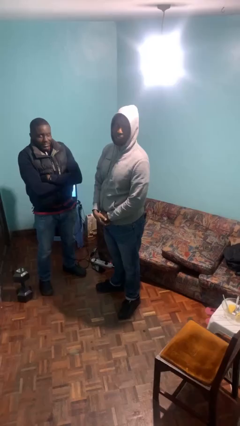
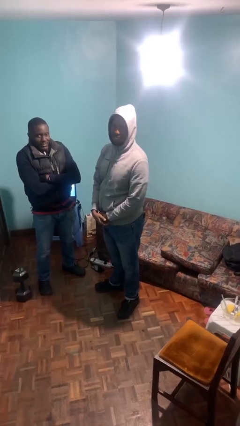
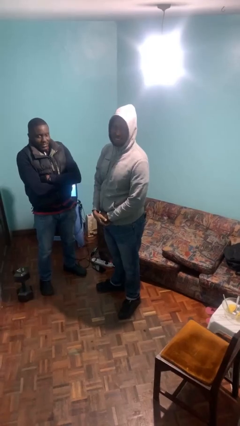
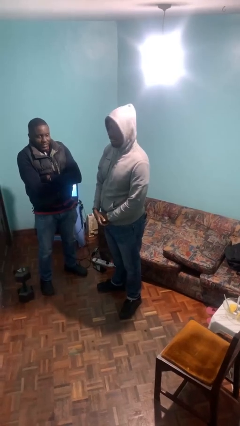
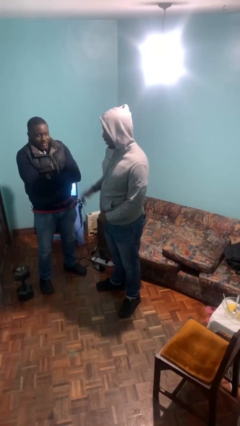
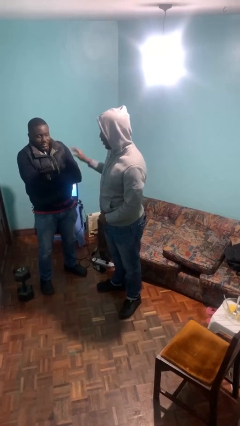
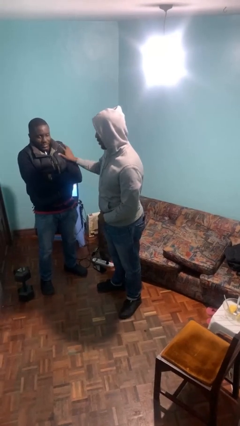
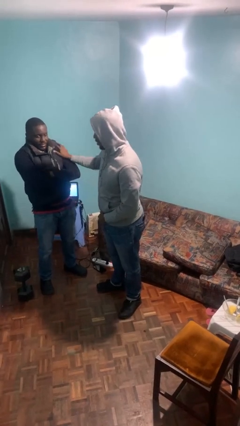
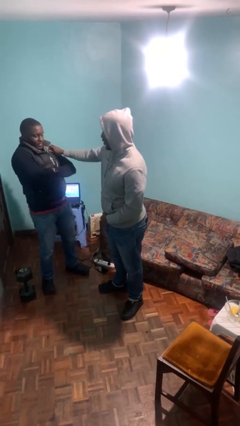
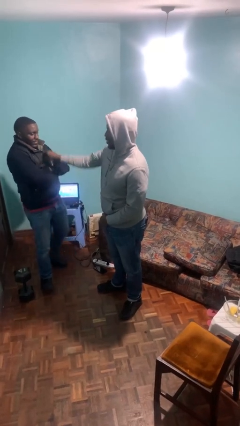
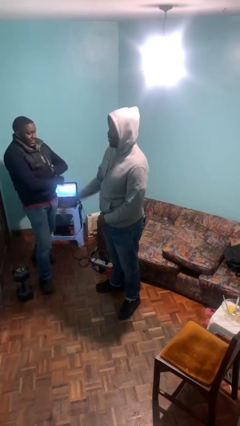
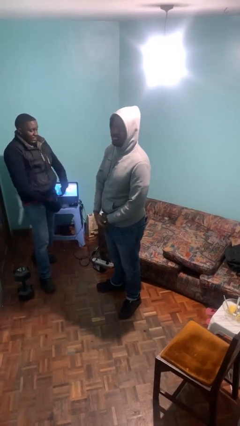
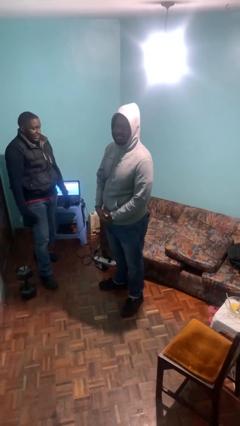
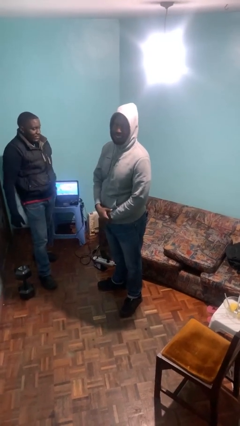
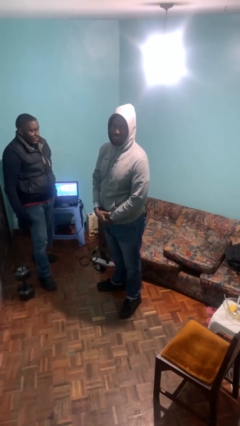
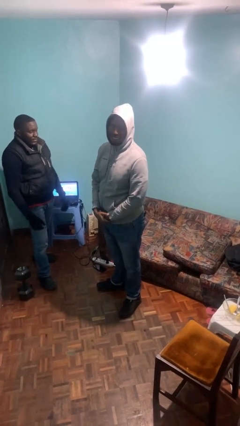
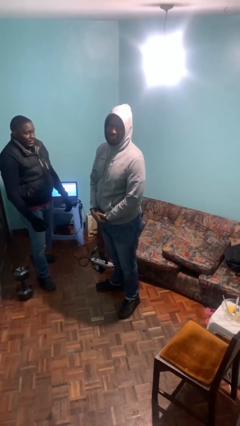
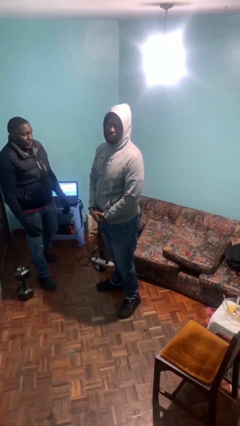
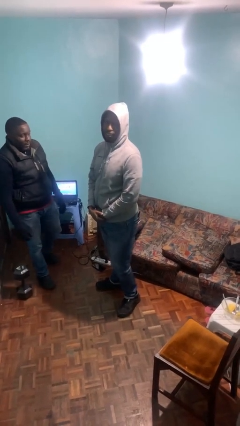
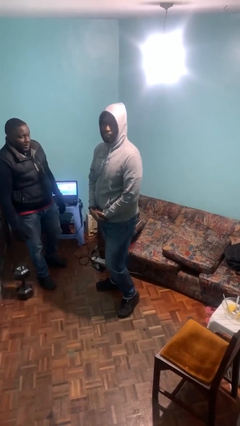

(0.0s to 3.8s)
person shoves person

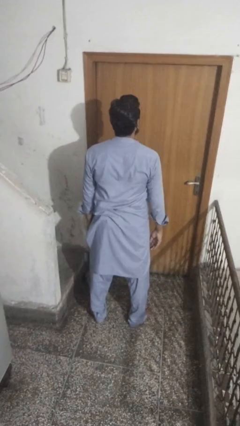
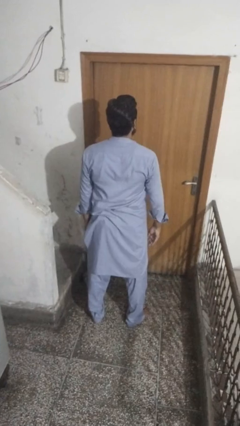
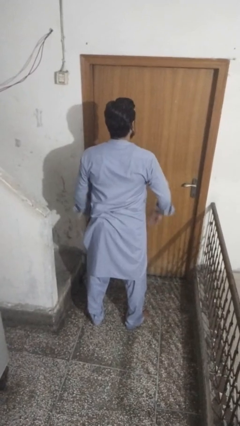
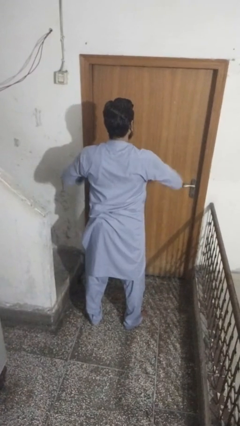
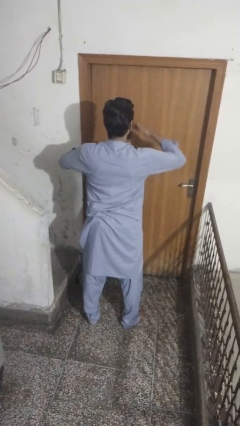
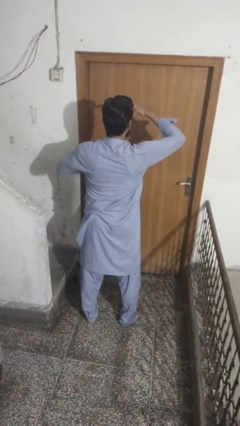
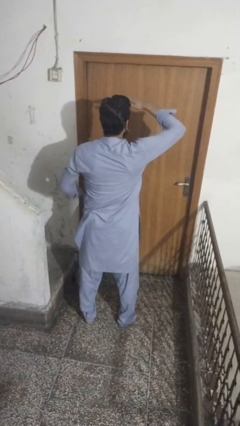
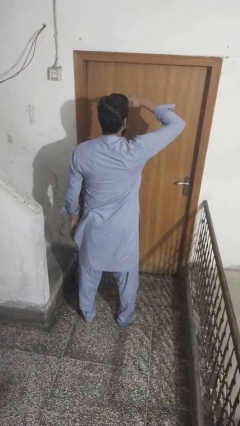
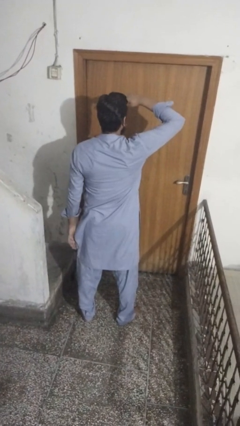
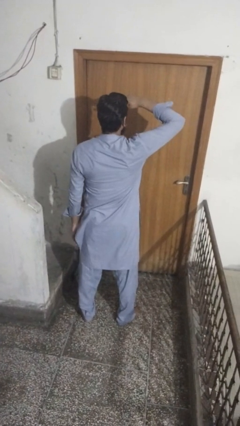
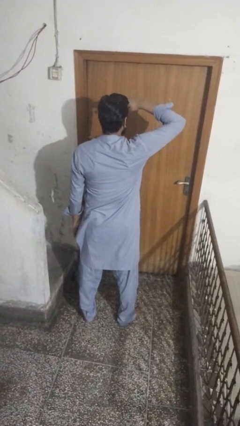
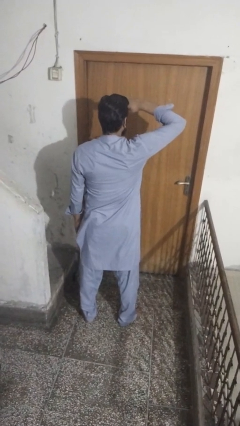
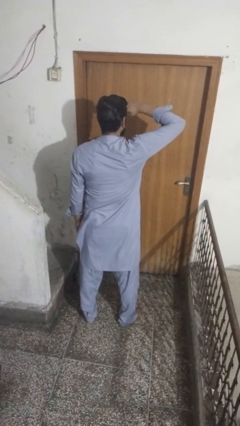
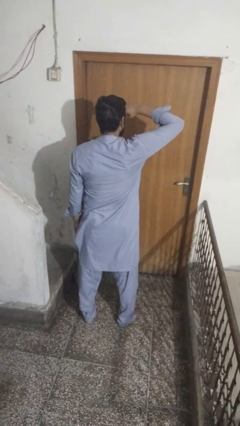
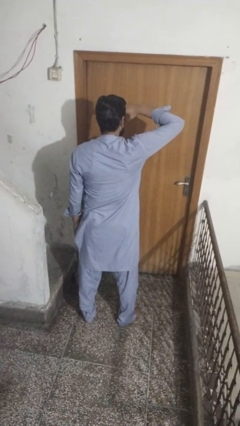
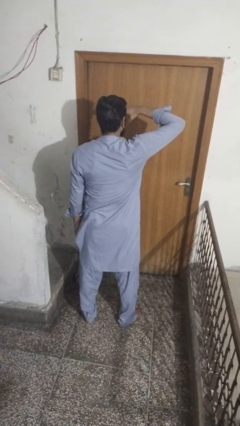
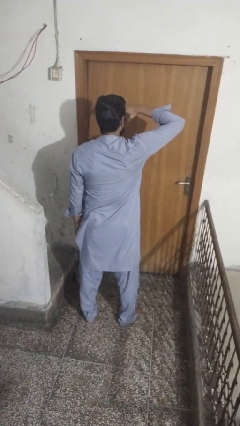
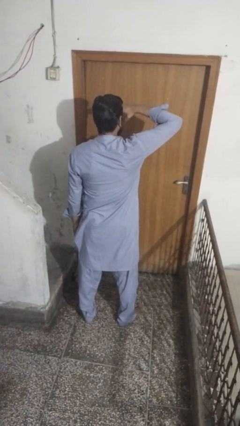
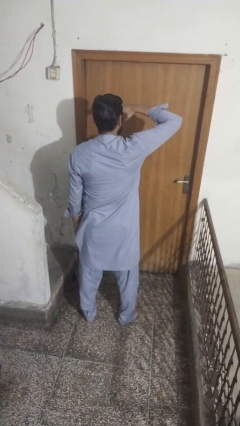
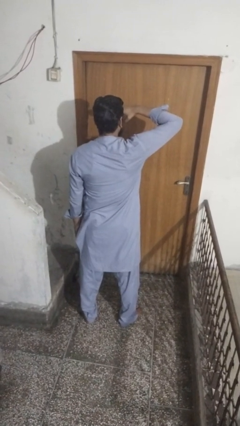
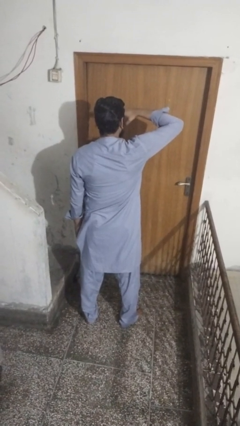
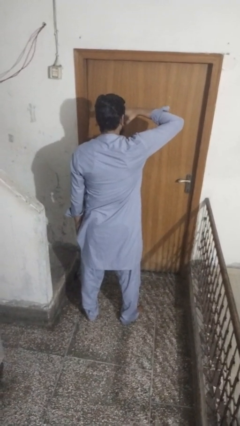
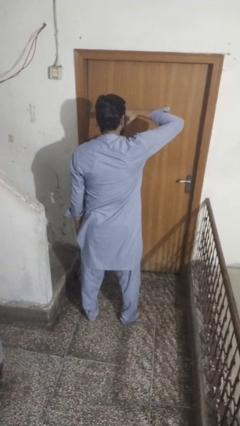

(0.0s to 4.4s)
person shades eyes

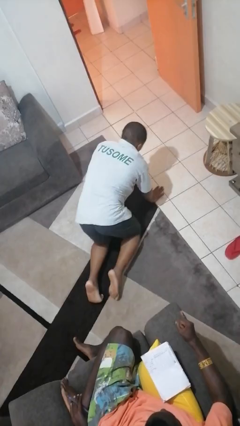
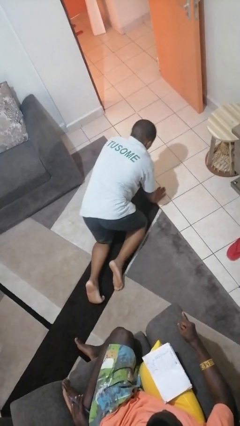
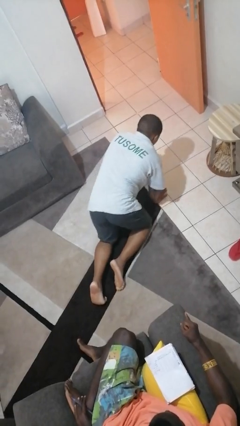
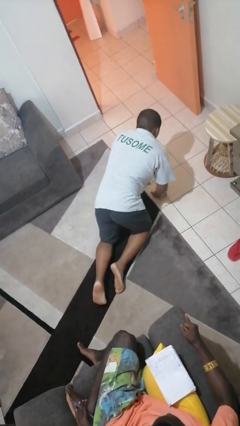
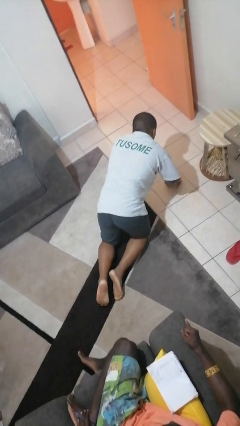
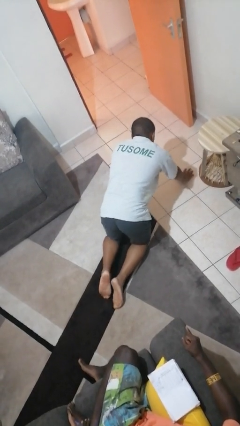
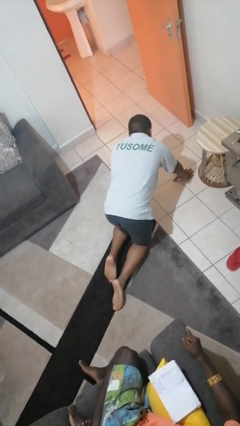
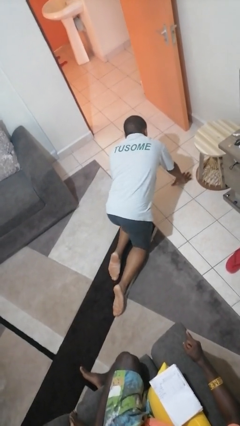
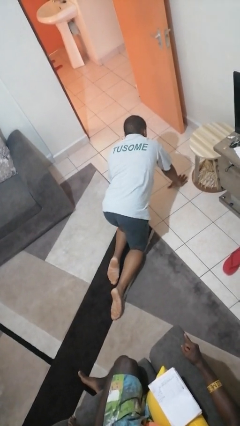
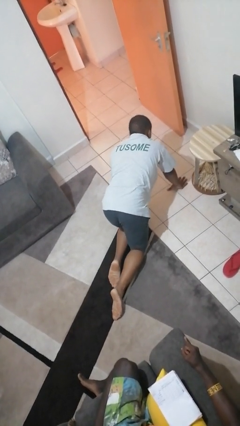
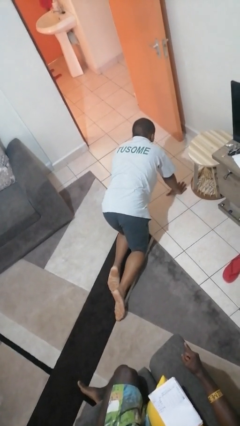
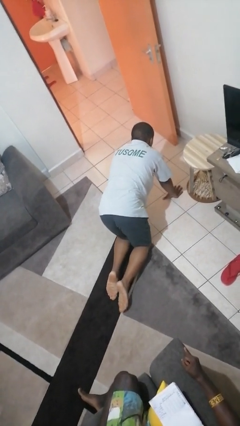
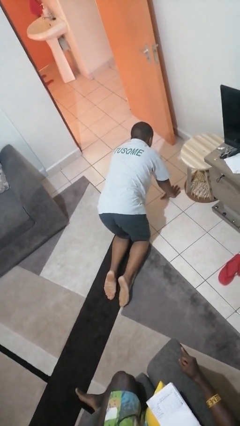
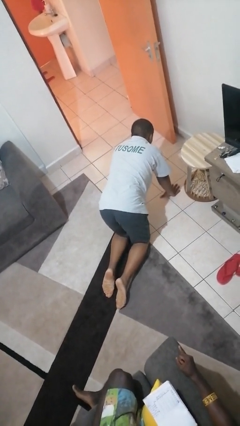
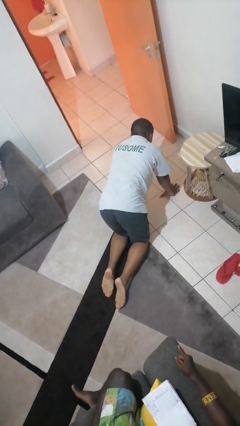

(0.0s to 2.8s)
person crawls

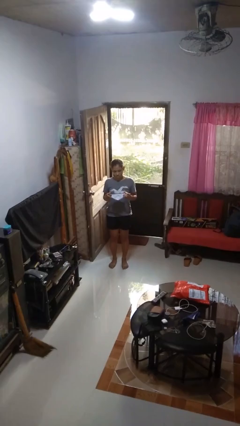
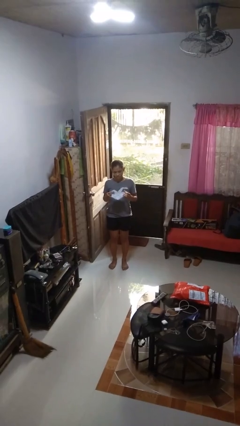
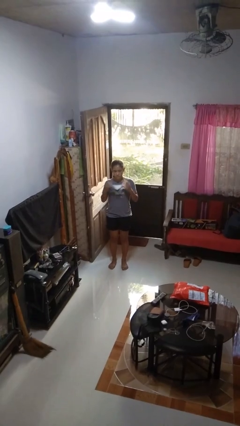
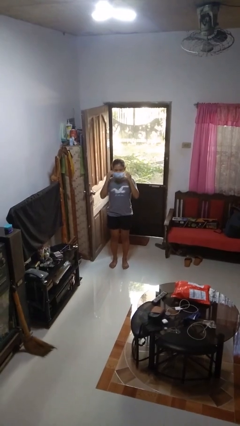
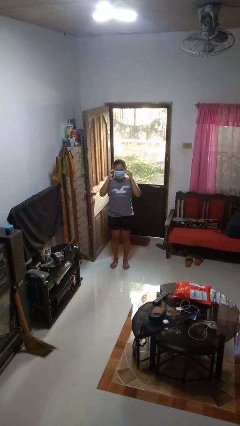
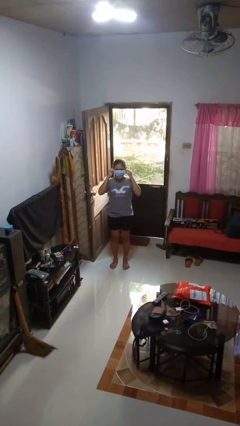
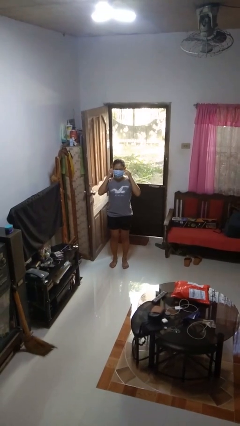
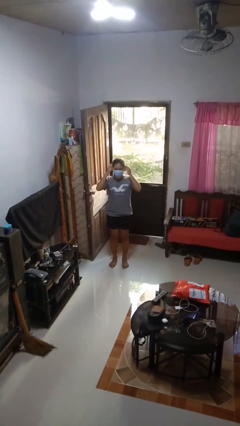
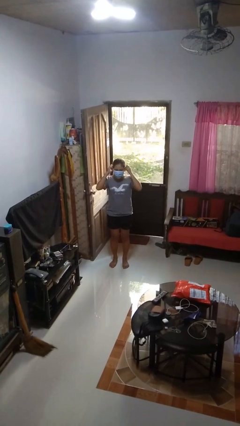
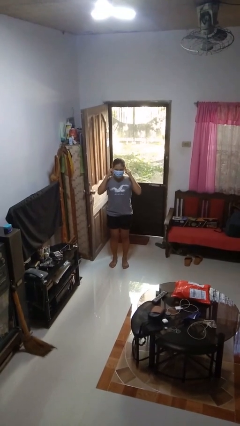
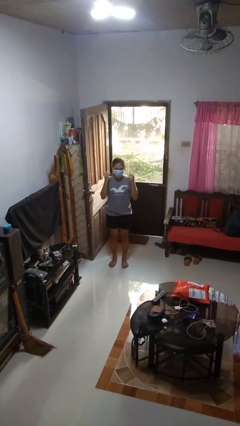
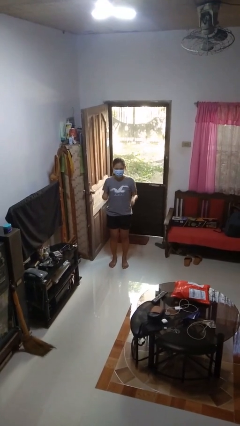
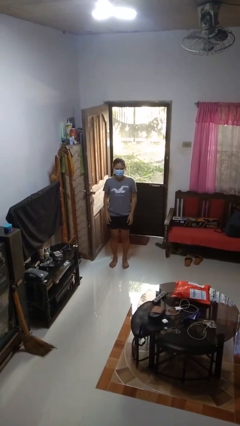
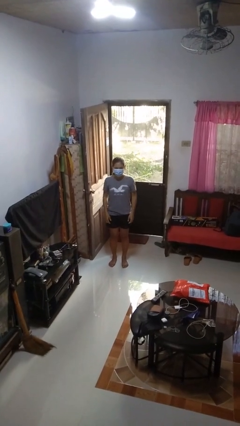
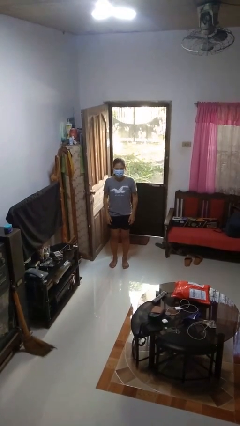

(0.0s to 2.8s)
person puts on facemask

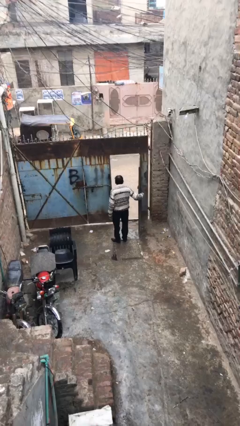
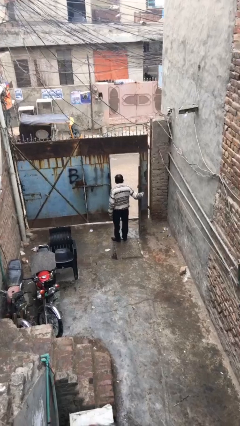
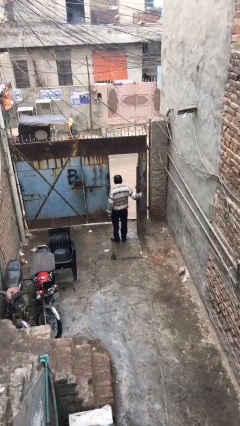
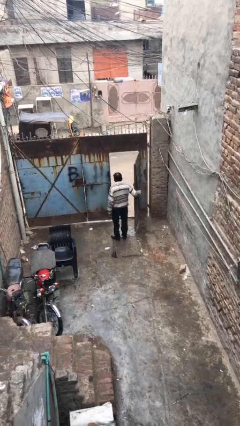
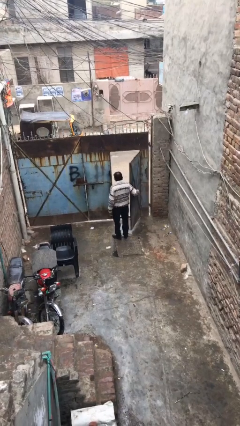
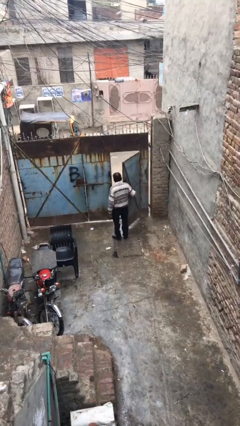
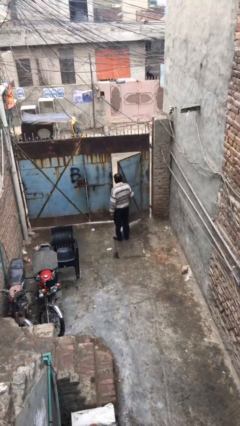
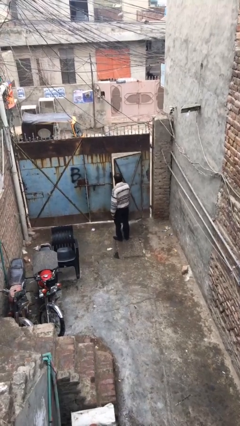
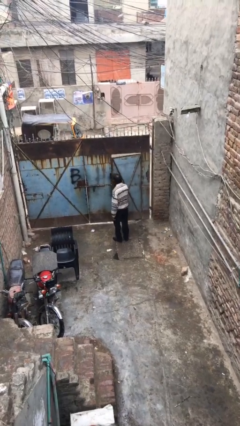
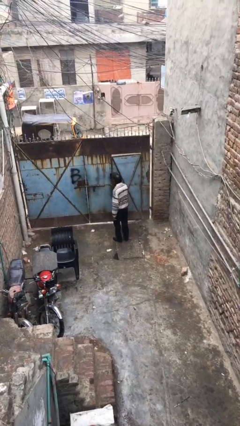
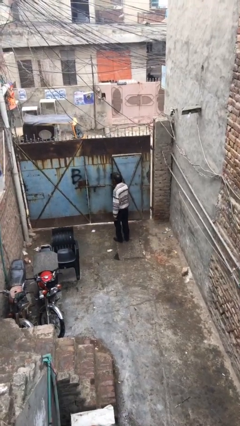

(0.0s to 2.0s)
person closes facility door

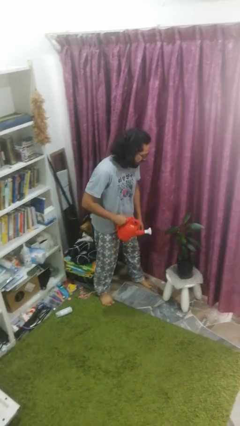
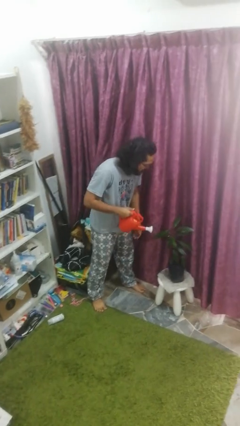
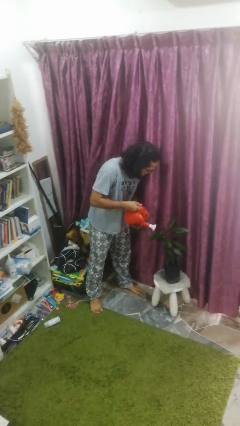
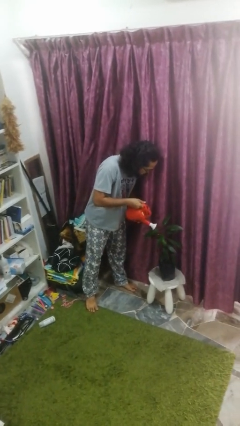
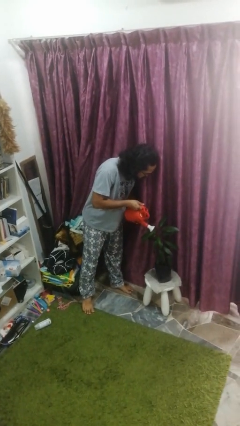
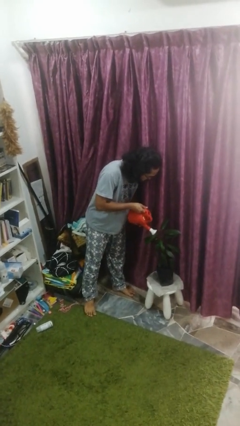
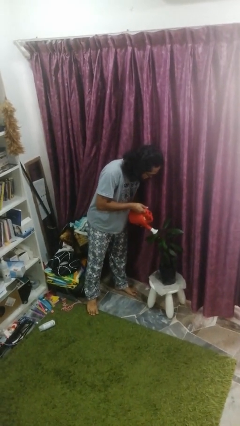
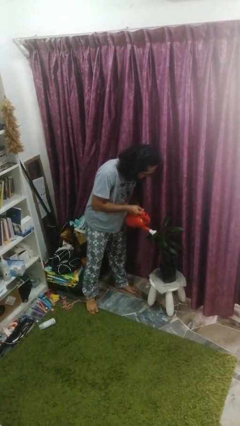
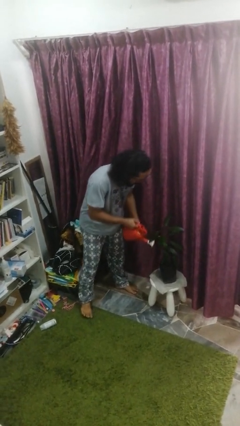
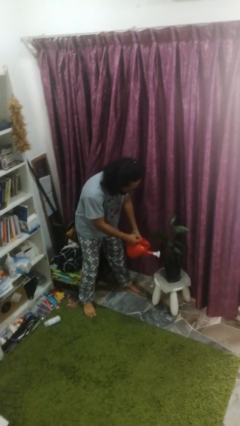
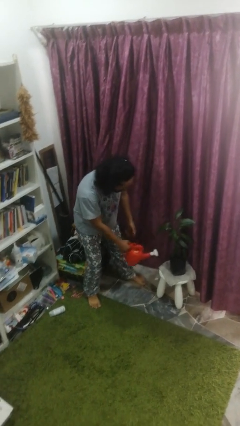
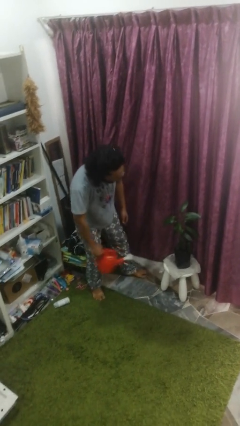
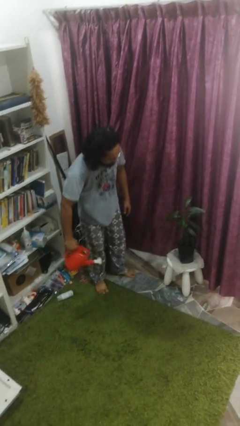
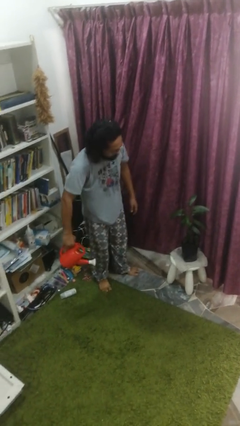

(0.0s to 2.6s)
person waters houseplant
